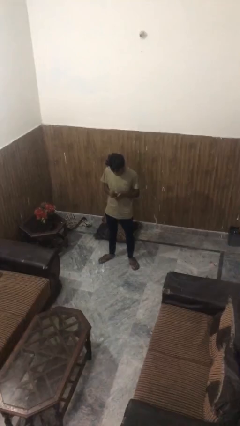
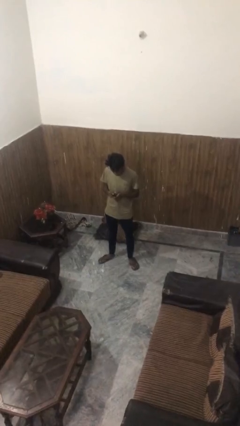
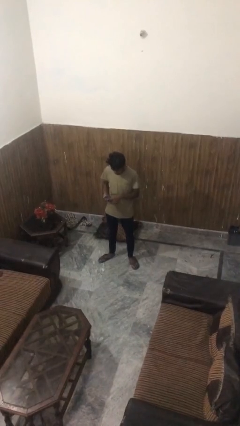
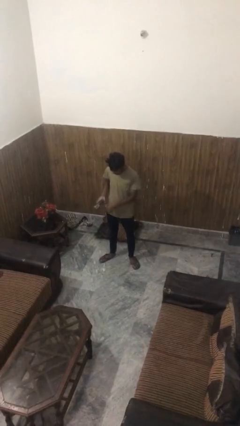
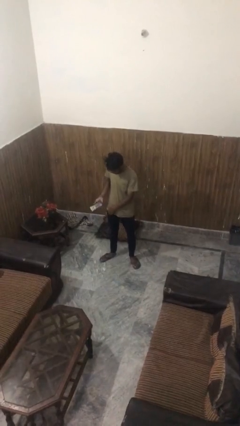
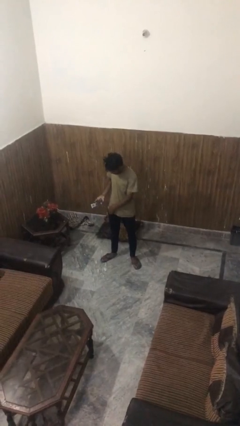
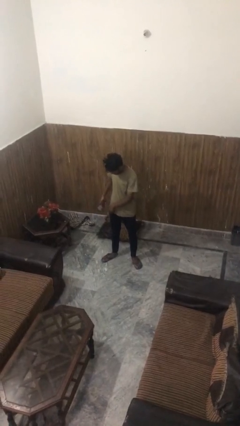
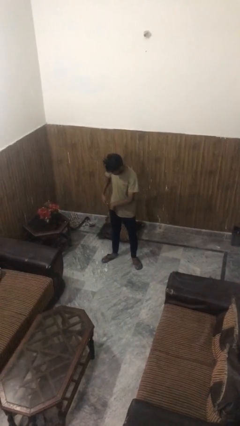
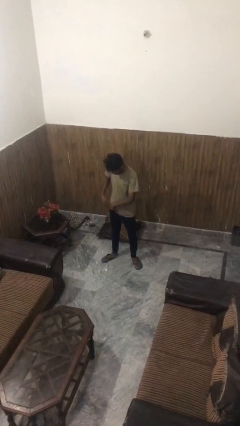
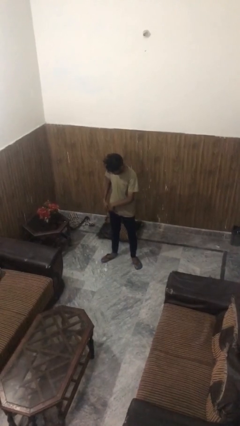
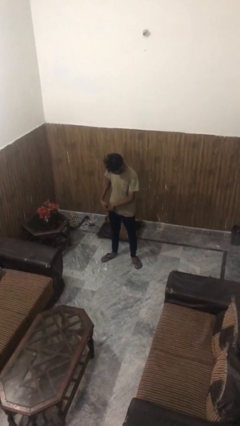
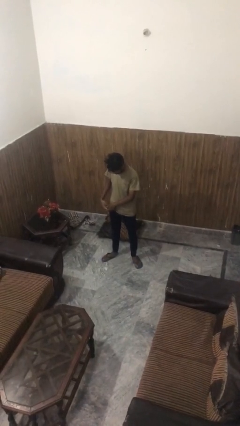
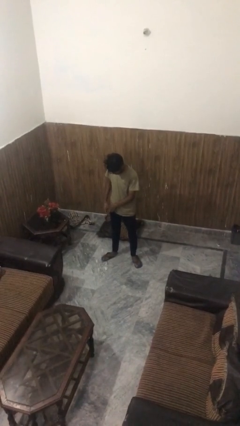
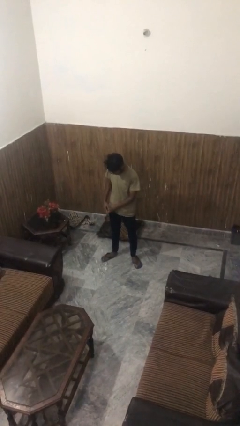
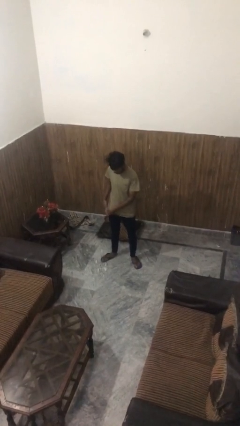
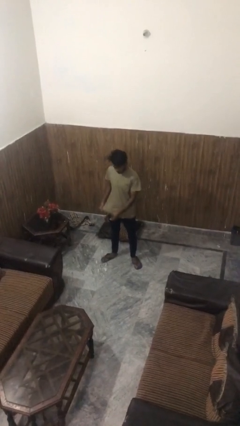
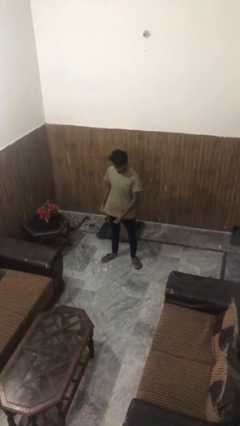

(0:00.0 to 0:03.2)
person puts phone into pocket

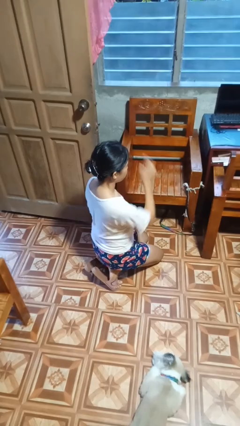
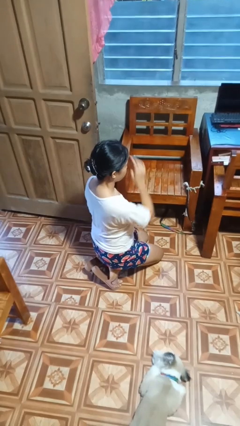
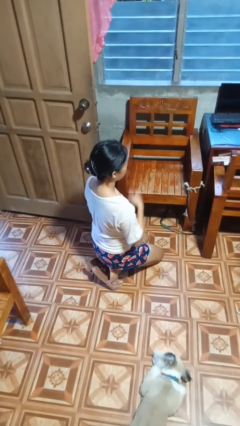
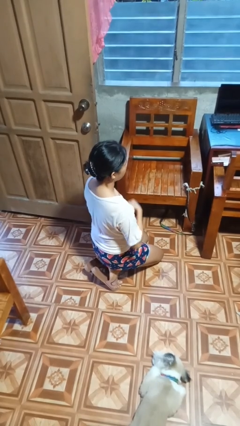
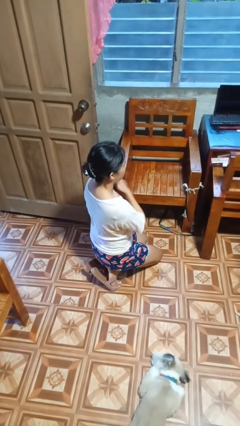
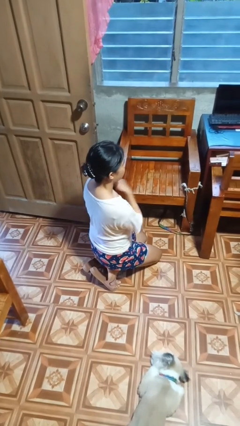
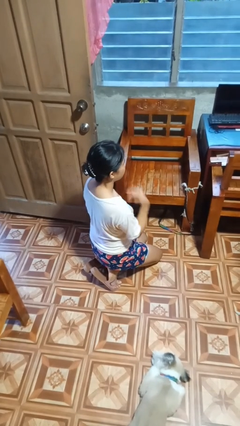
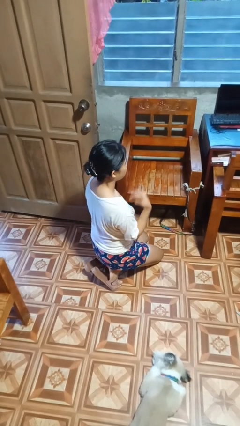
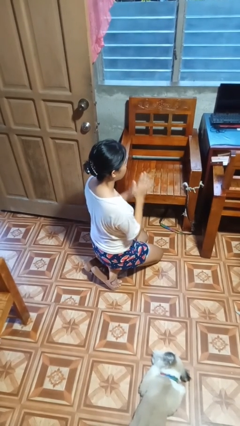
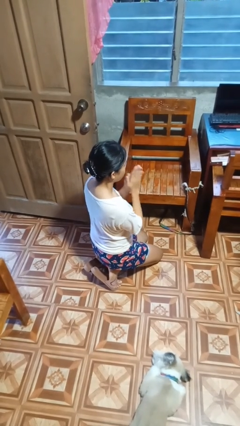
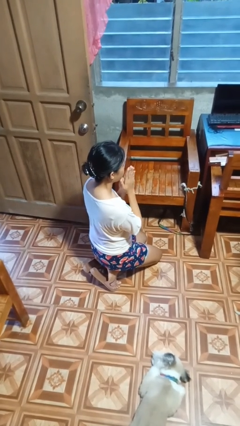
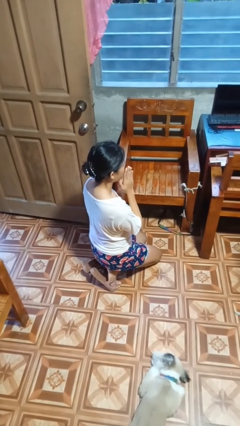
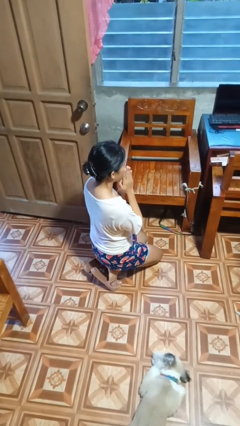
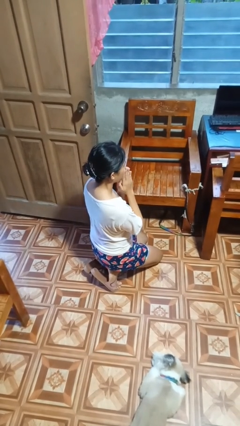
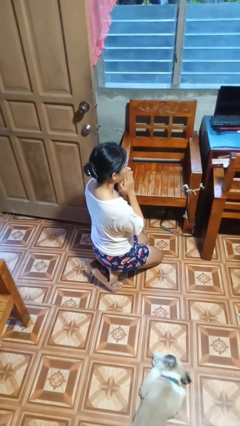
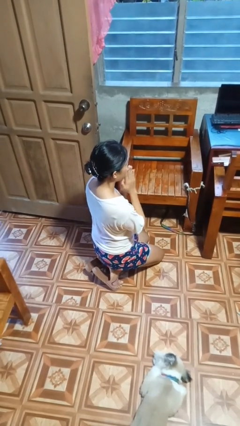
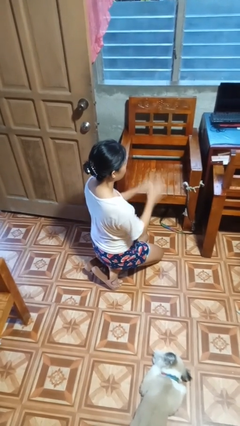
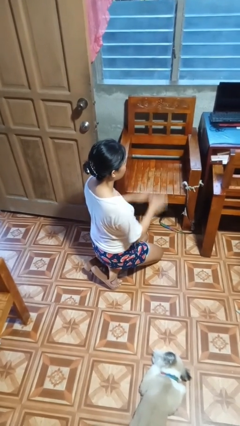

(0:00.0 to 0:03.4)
person prays

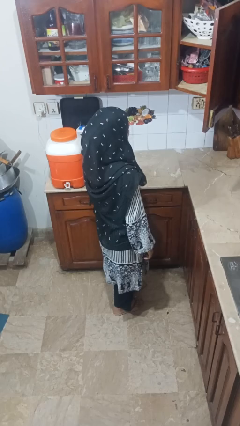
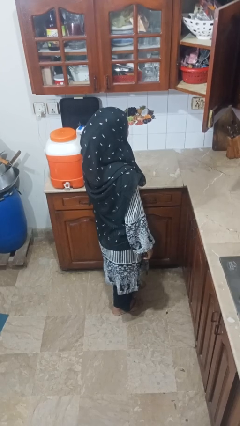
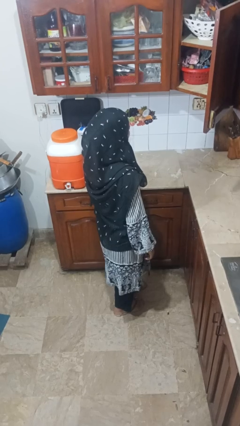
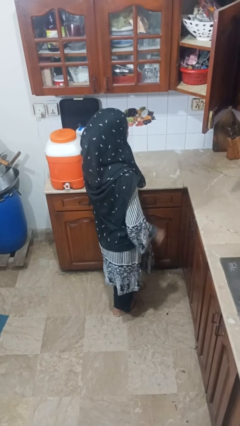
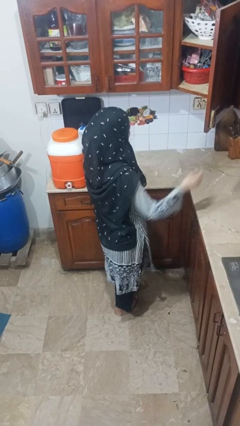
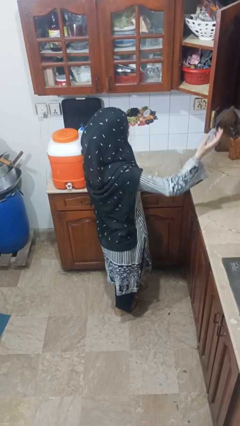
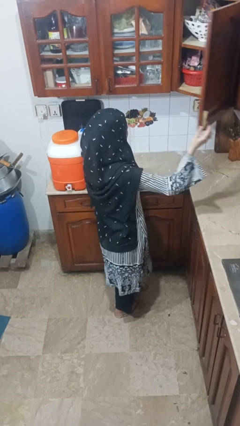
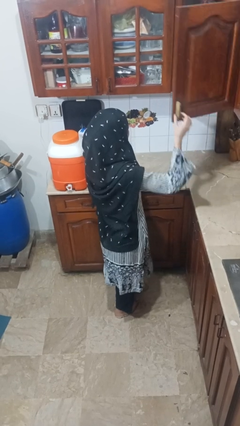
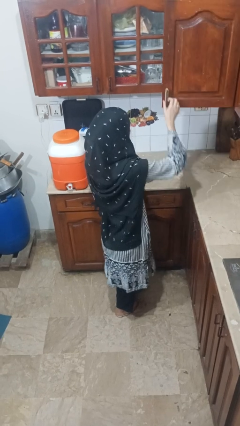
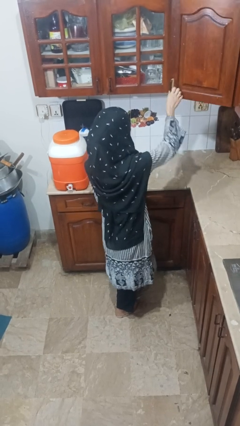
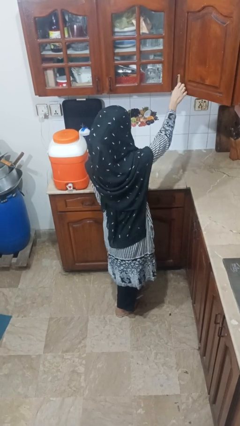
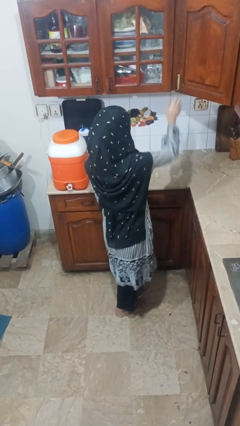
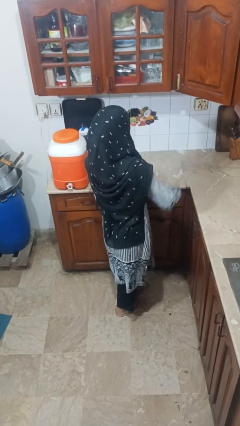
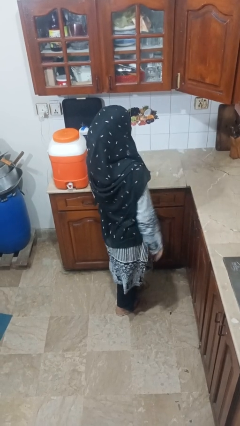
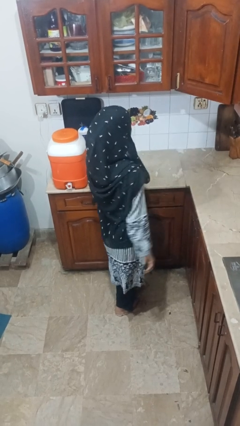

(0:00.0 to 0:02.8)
person closes cabinet

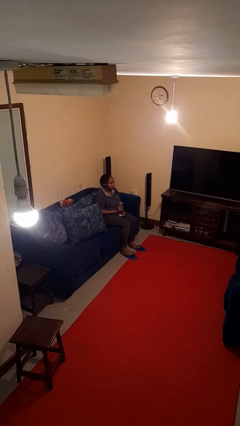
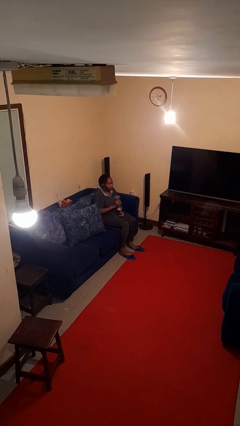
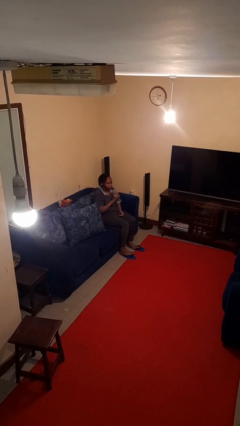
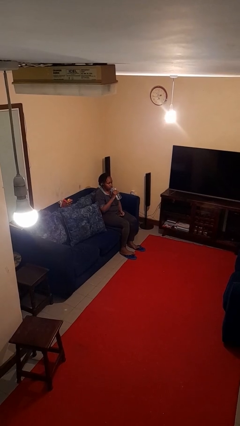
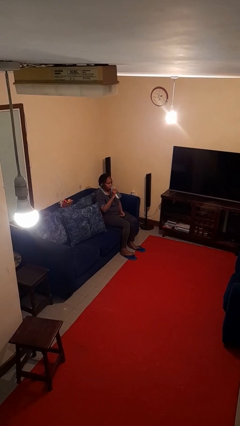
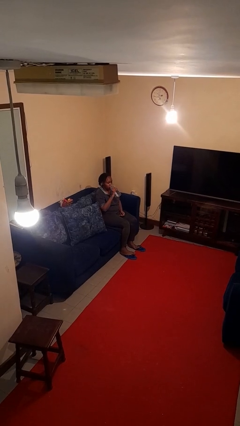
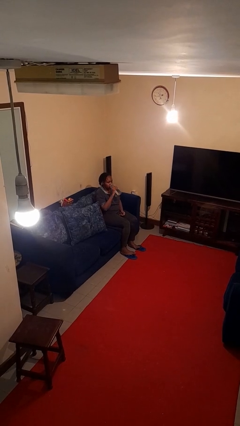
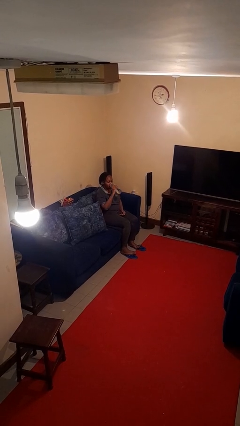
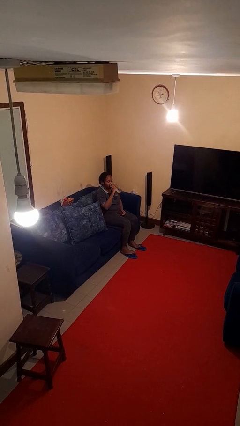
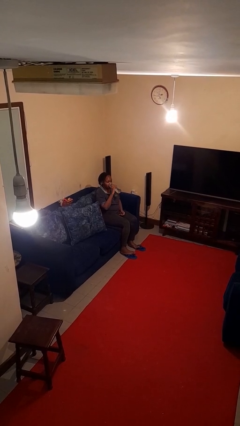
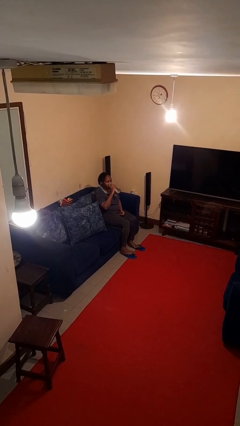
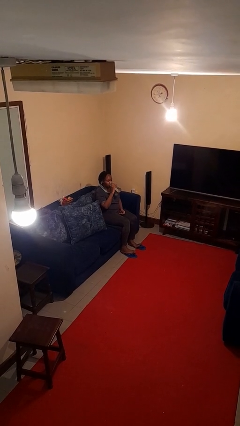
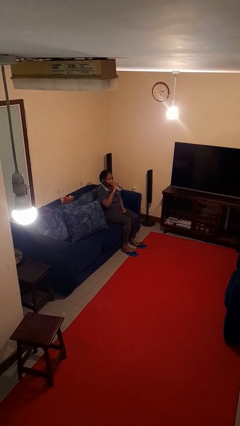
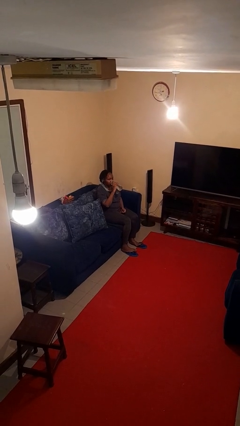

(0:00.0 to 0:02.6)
person drinks from bottle

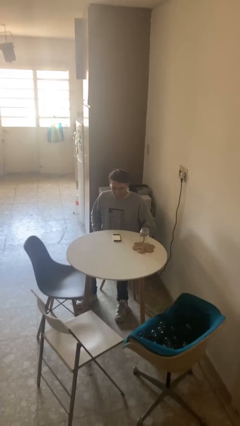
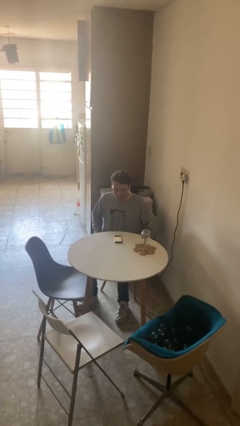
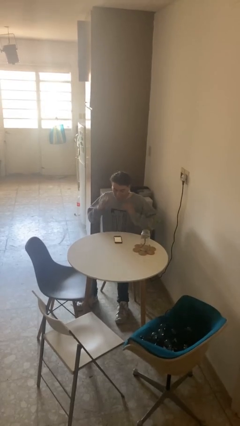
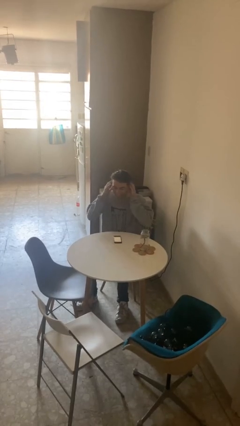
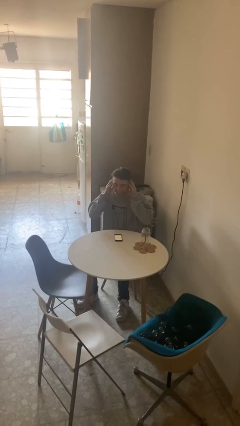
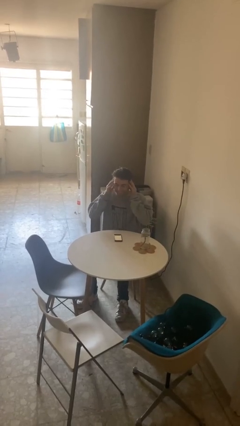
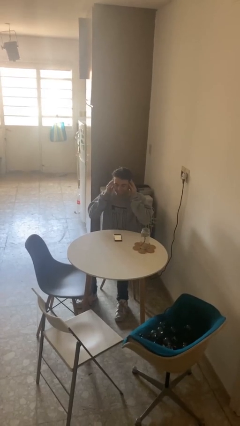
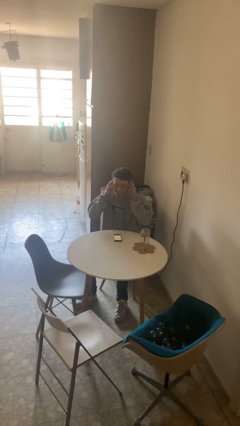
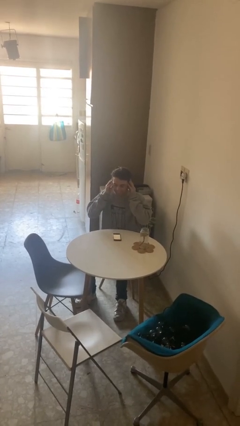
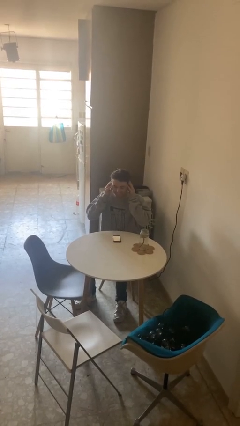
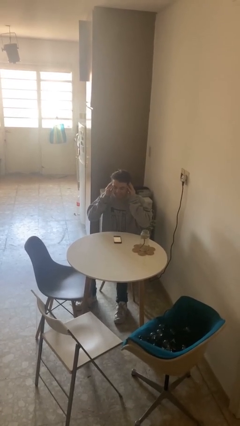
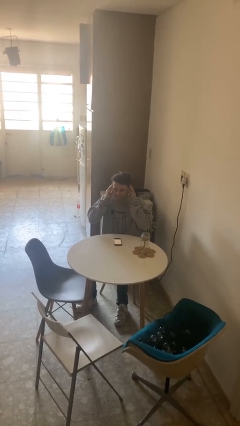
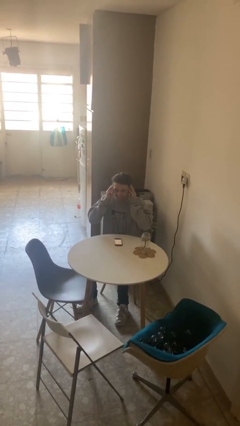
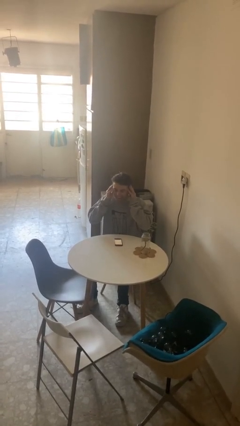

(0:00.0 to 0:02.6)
person puts fingers in ear

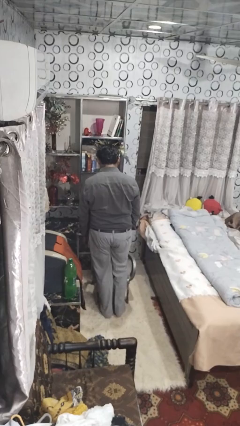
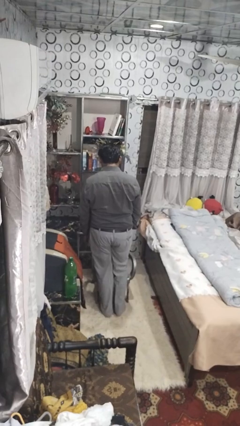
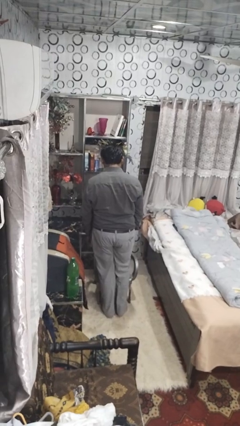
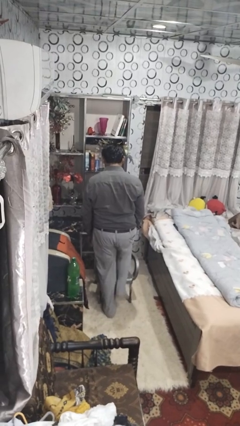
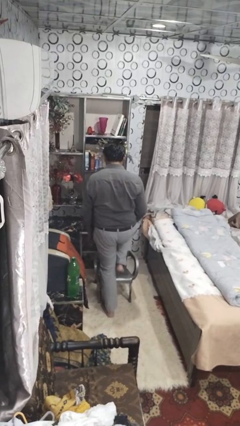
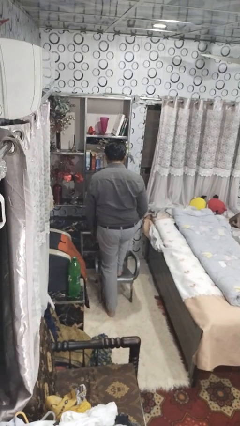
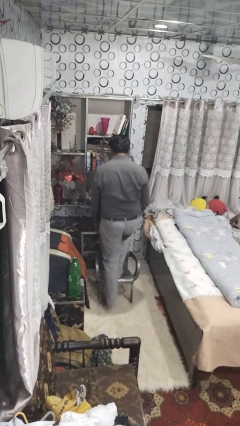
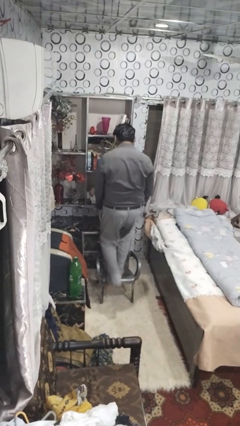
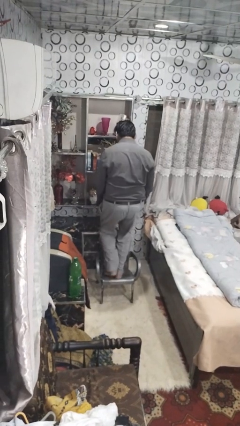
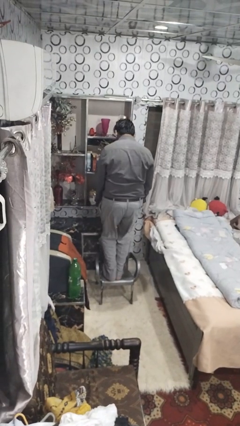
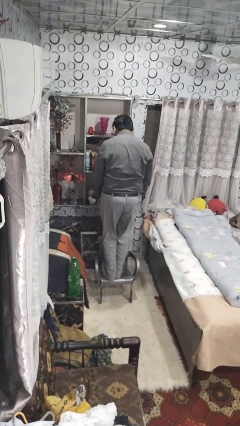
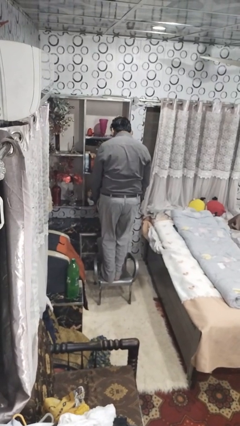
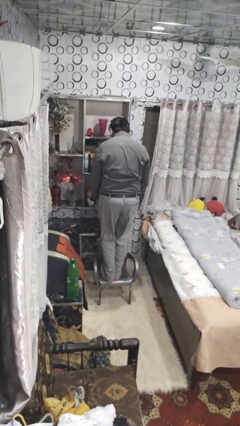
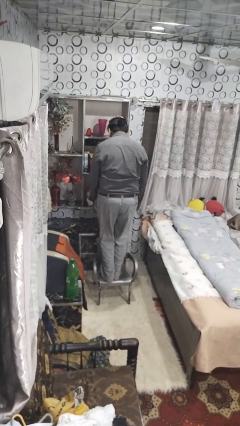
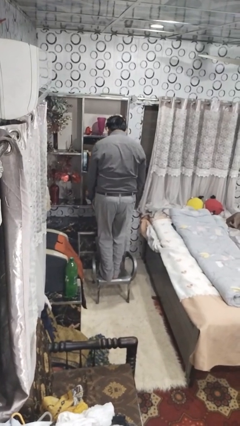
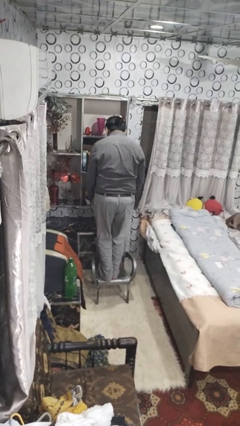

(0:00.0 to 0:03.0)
person climbs on chair
